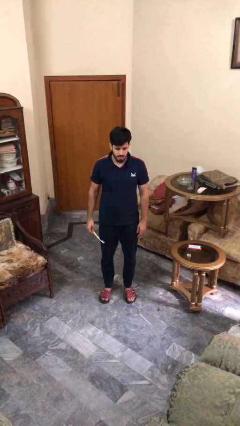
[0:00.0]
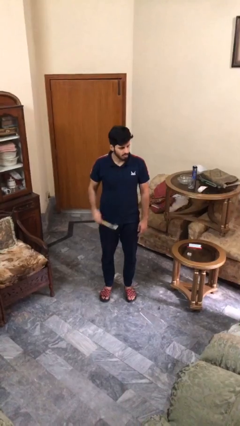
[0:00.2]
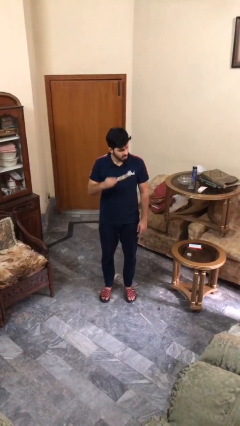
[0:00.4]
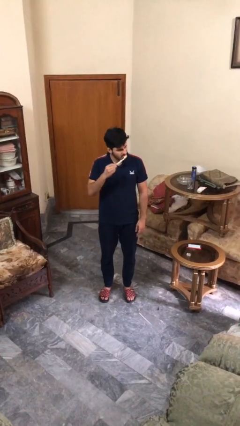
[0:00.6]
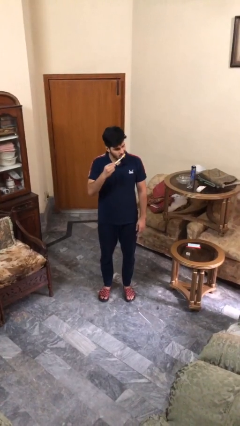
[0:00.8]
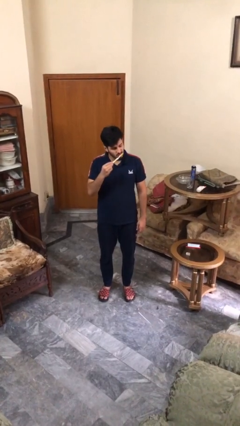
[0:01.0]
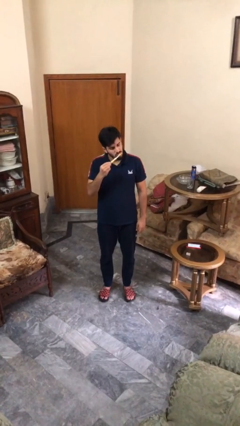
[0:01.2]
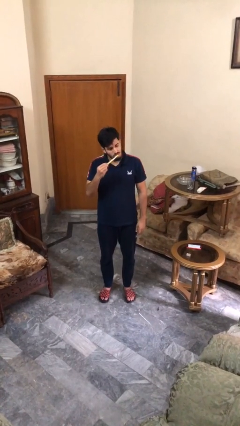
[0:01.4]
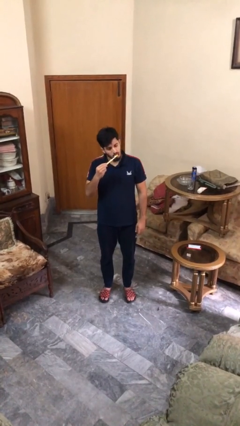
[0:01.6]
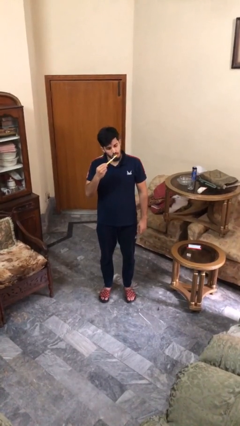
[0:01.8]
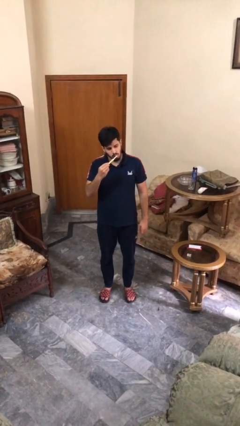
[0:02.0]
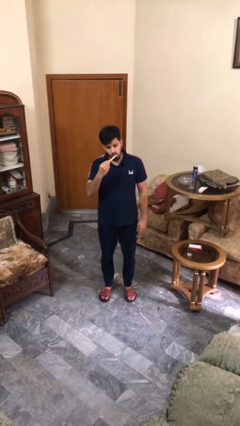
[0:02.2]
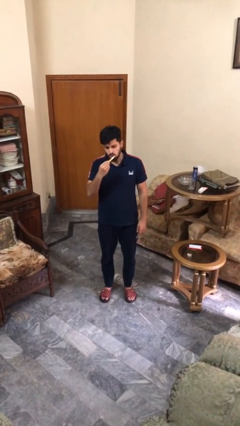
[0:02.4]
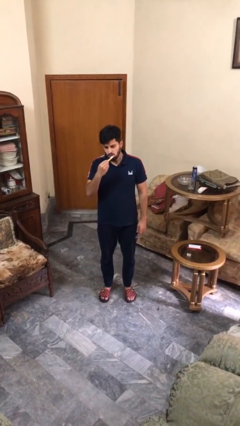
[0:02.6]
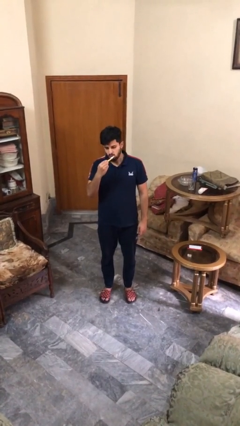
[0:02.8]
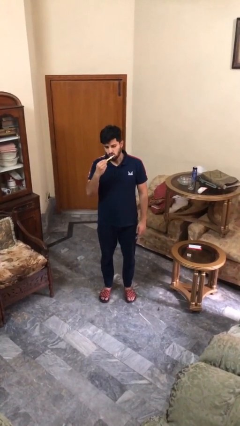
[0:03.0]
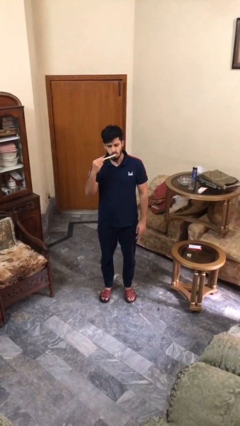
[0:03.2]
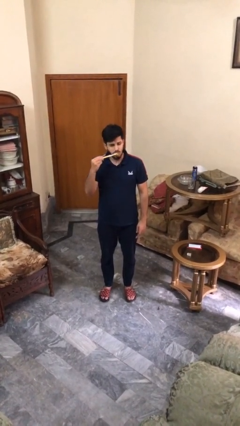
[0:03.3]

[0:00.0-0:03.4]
person brushes teeth

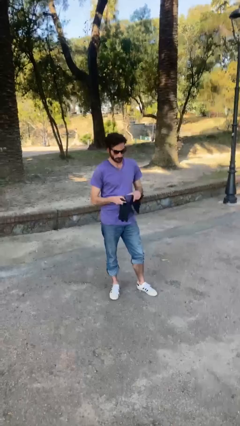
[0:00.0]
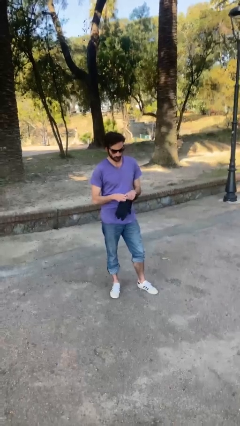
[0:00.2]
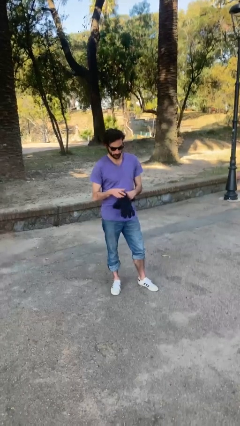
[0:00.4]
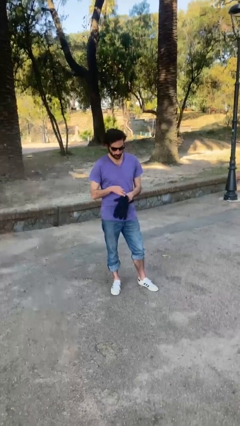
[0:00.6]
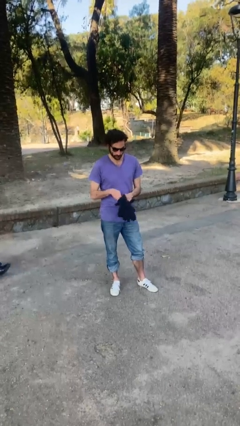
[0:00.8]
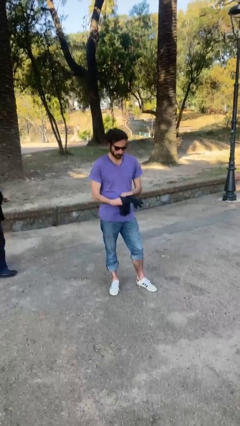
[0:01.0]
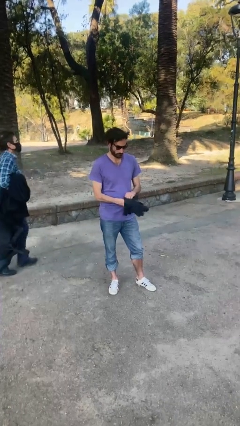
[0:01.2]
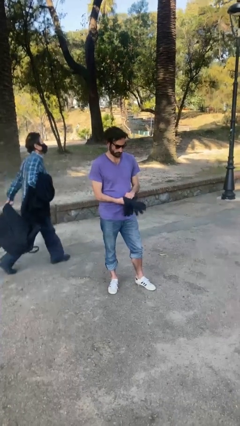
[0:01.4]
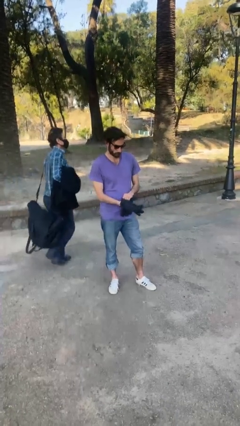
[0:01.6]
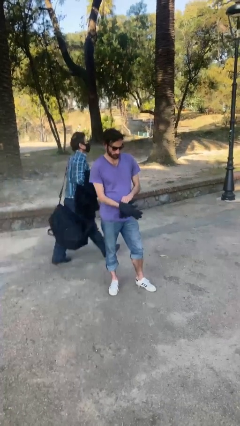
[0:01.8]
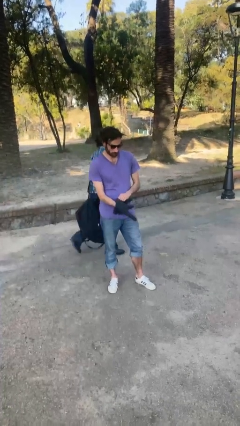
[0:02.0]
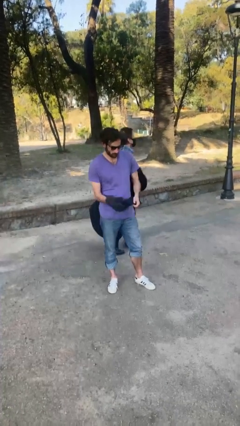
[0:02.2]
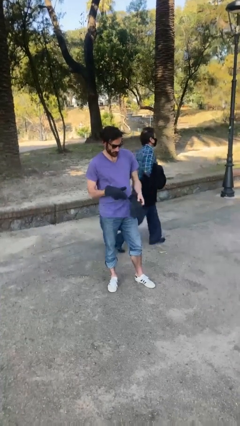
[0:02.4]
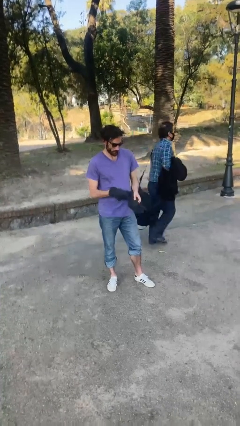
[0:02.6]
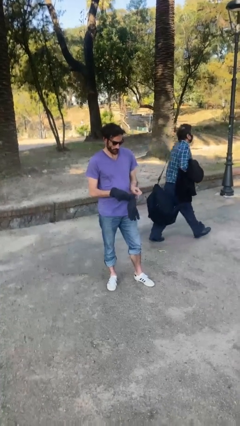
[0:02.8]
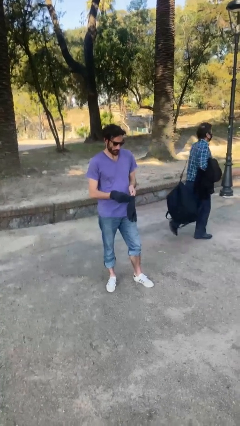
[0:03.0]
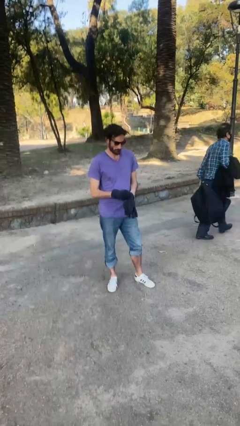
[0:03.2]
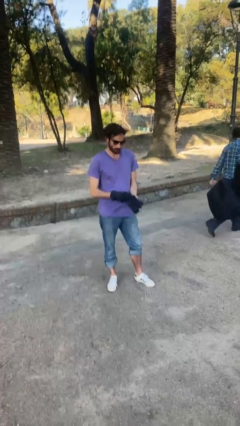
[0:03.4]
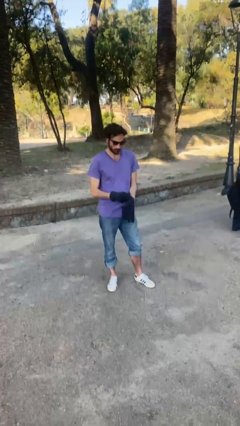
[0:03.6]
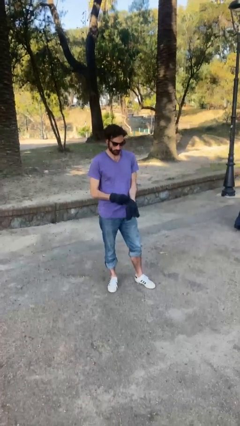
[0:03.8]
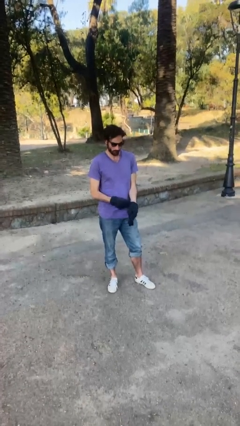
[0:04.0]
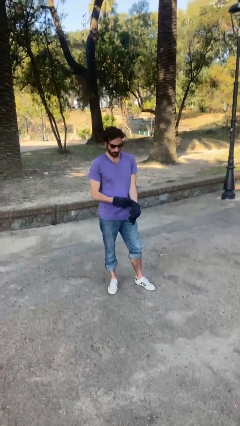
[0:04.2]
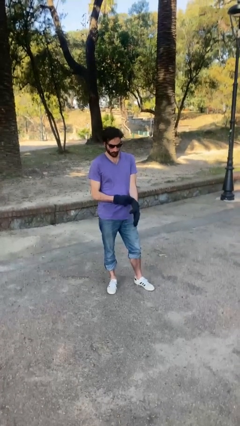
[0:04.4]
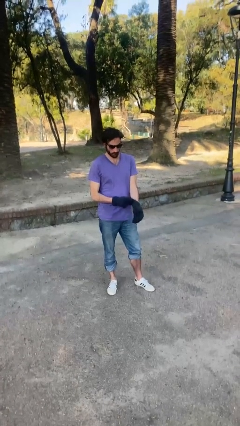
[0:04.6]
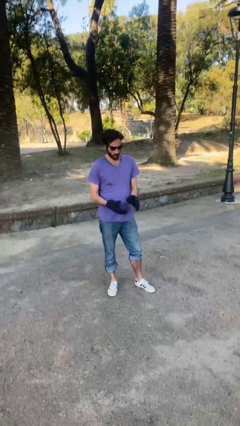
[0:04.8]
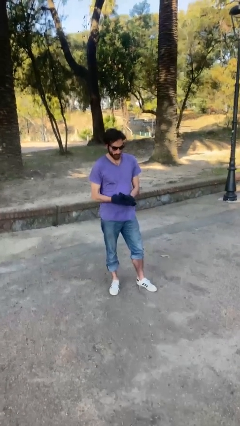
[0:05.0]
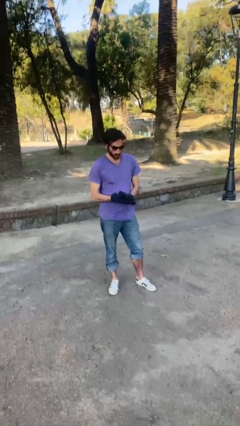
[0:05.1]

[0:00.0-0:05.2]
person puts on gloves

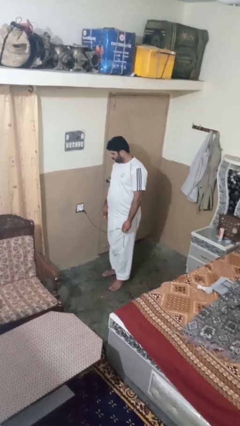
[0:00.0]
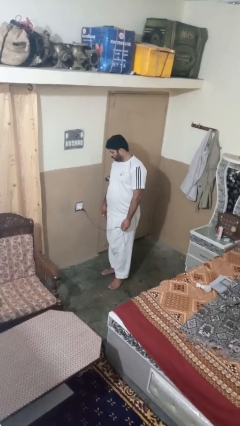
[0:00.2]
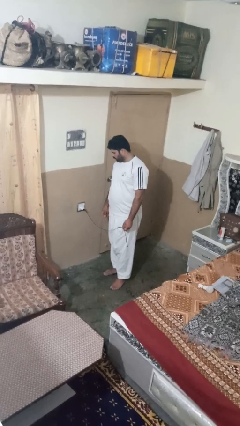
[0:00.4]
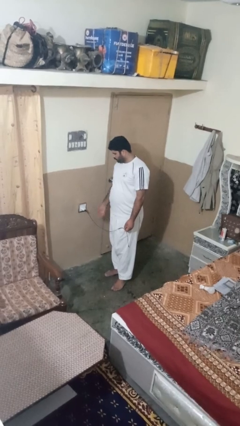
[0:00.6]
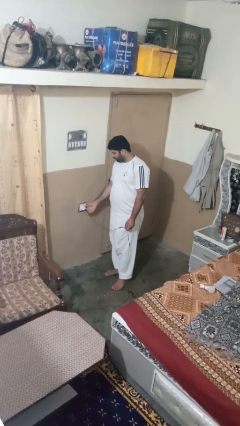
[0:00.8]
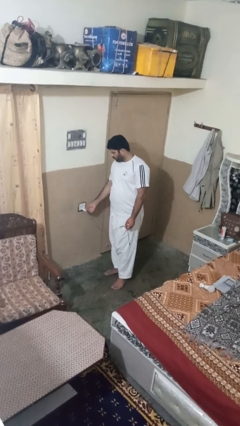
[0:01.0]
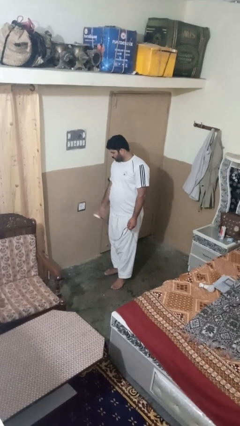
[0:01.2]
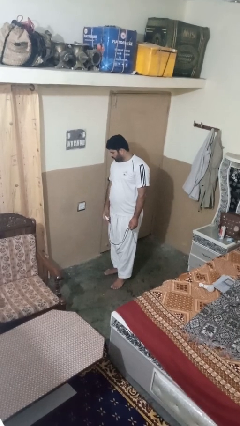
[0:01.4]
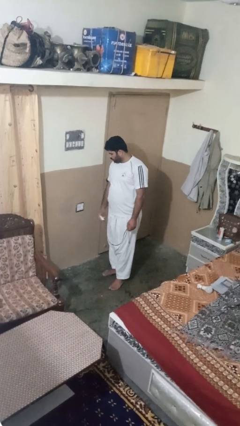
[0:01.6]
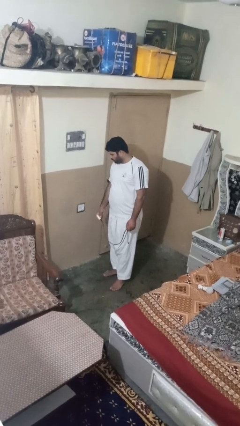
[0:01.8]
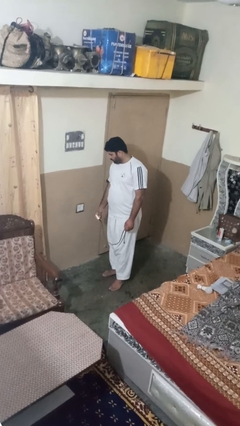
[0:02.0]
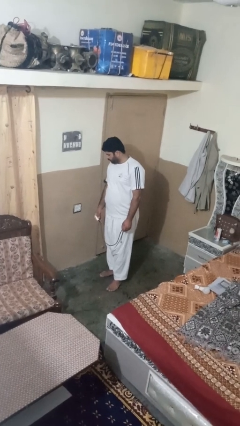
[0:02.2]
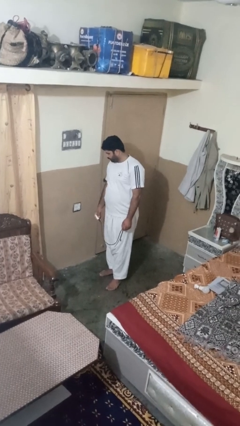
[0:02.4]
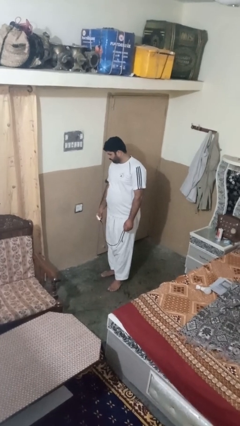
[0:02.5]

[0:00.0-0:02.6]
person unplugs from electrical socket

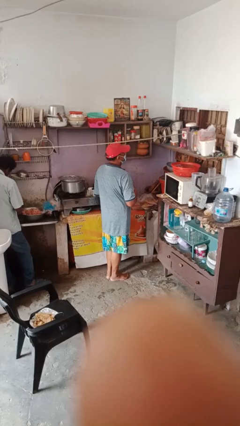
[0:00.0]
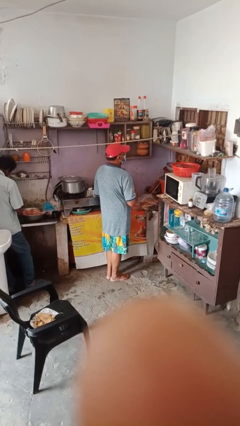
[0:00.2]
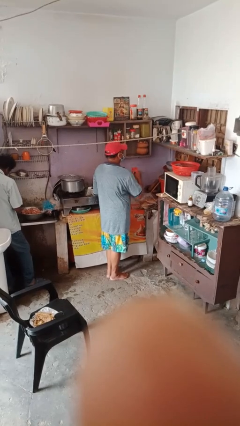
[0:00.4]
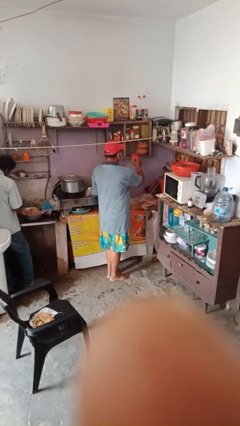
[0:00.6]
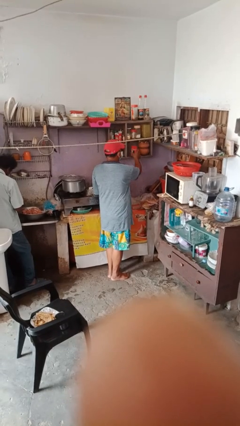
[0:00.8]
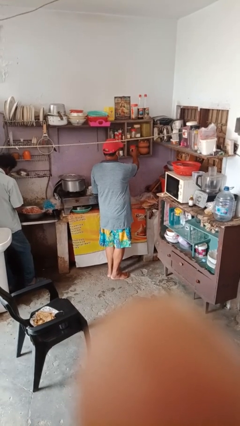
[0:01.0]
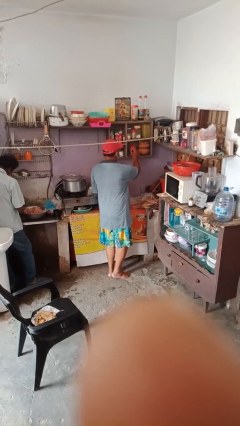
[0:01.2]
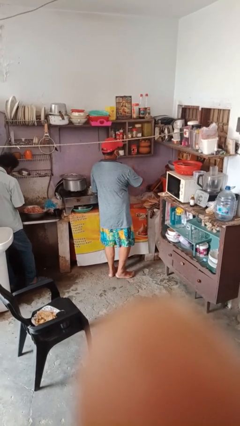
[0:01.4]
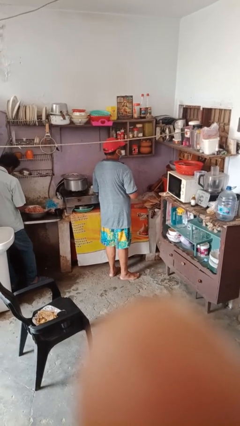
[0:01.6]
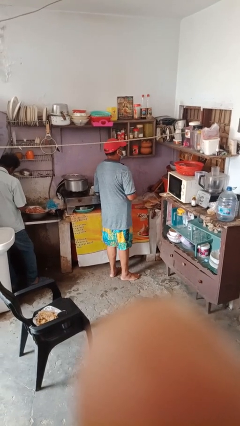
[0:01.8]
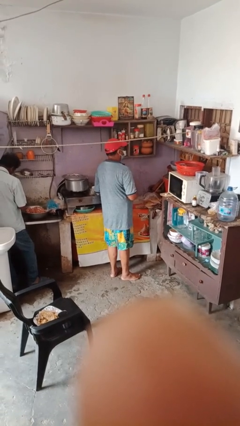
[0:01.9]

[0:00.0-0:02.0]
person puts down object on shelf

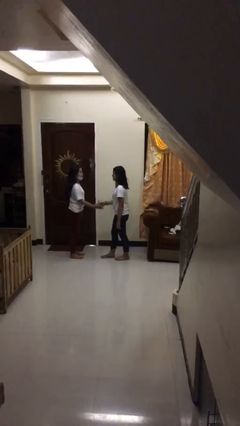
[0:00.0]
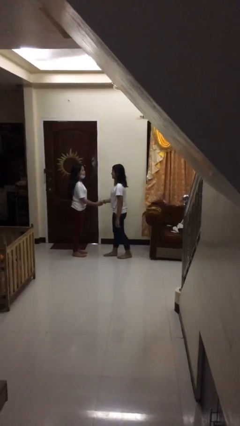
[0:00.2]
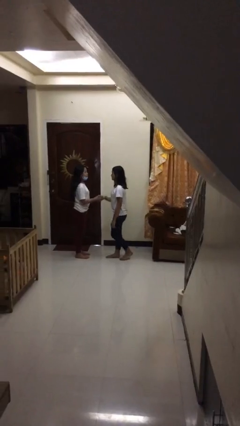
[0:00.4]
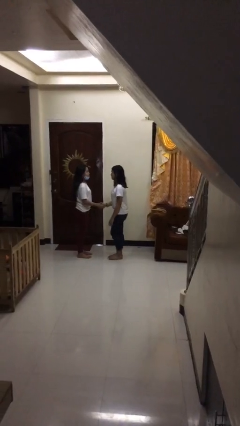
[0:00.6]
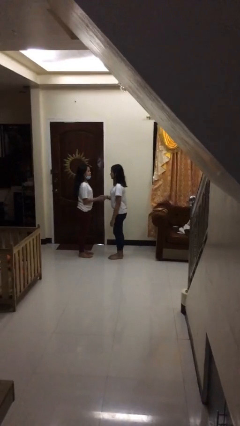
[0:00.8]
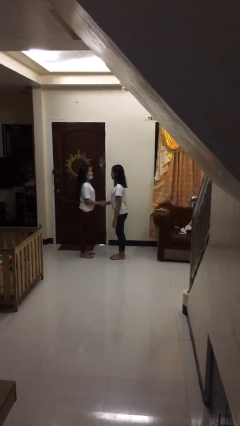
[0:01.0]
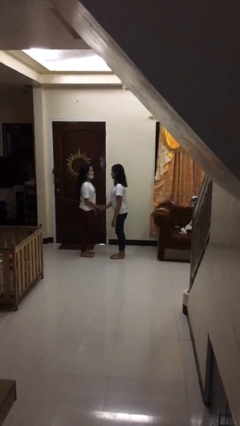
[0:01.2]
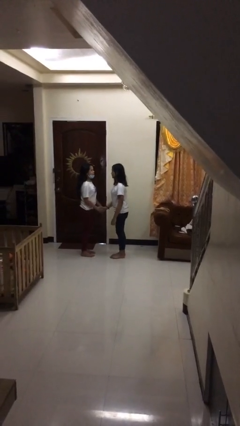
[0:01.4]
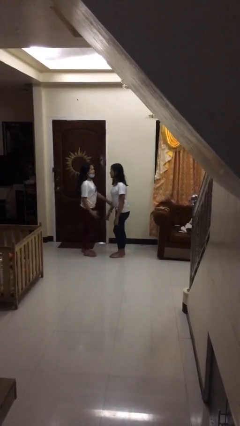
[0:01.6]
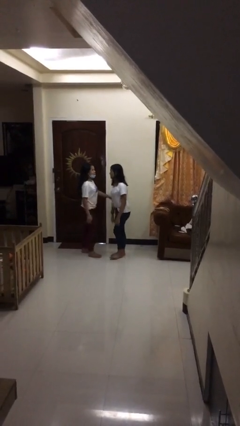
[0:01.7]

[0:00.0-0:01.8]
person shakes hand

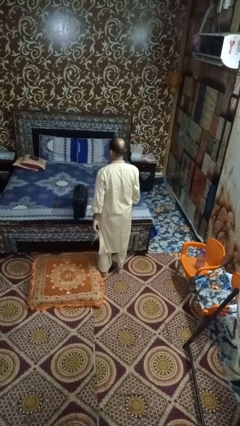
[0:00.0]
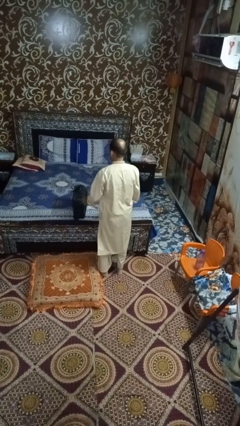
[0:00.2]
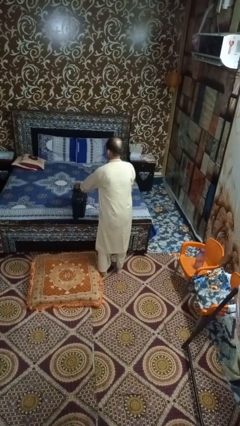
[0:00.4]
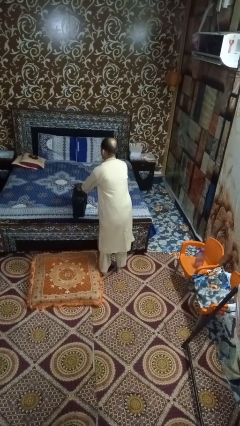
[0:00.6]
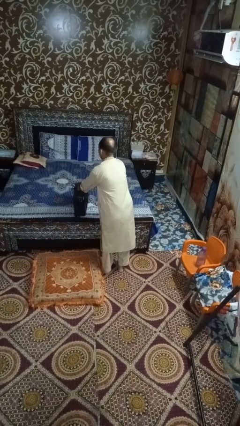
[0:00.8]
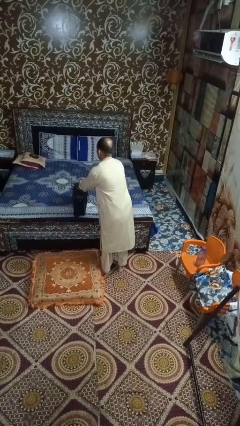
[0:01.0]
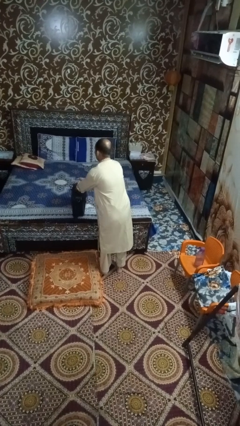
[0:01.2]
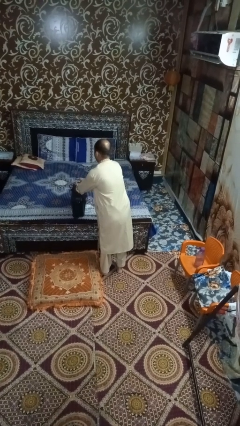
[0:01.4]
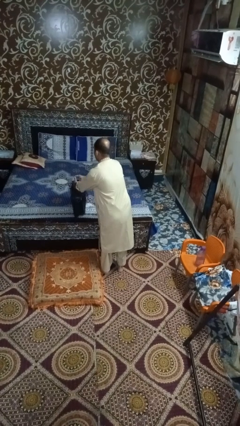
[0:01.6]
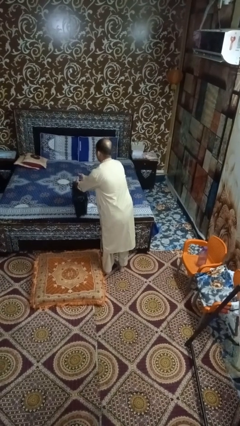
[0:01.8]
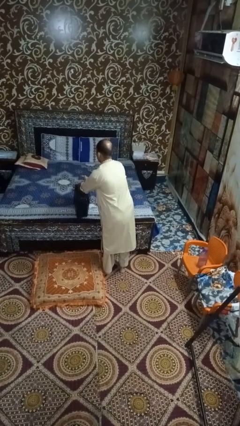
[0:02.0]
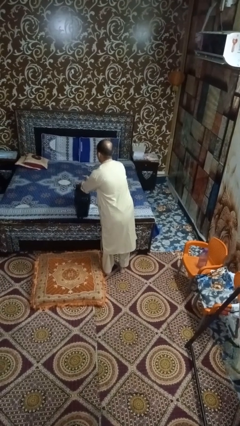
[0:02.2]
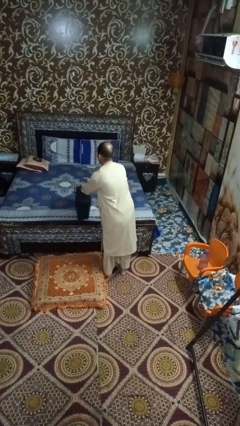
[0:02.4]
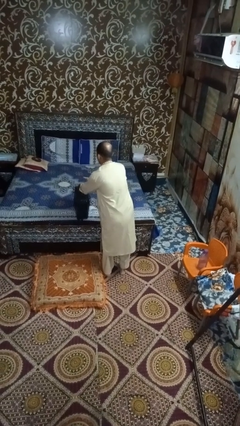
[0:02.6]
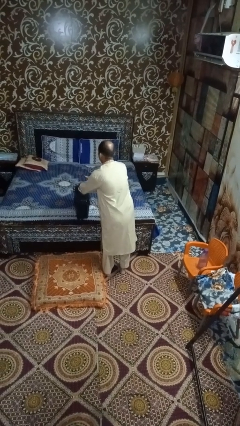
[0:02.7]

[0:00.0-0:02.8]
person picks up object from bed
